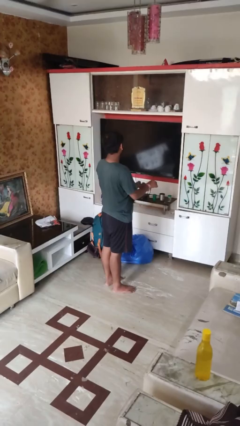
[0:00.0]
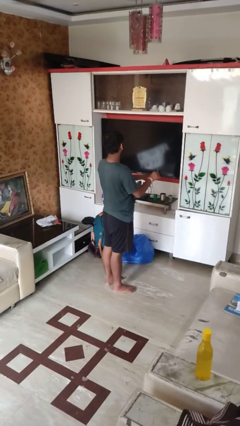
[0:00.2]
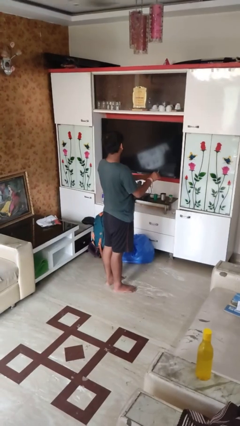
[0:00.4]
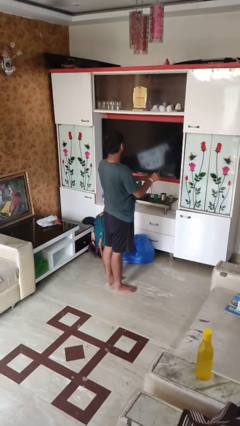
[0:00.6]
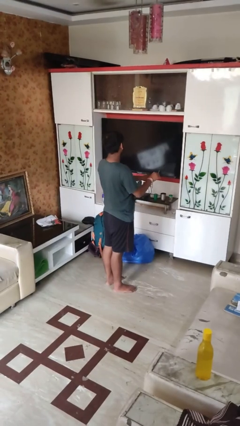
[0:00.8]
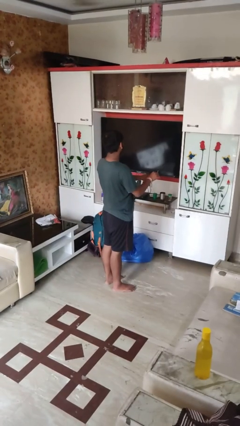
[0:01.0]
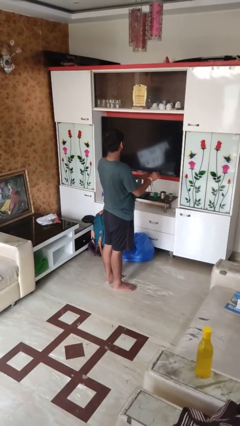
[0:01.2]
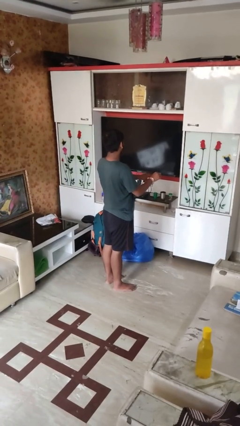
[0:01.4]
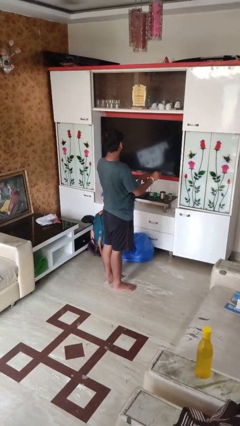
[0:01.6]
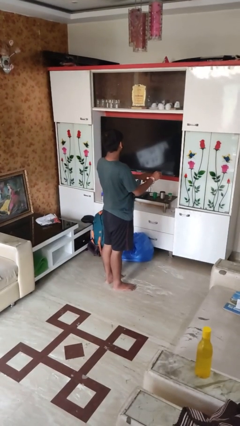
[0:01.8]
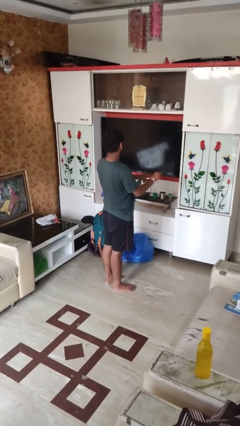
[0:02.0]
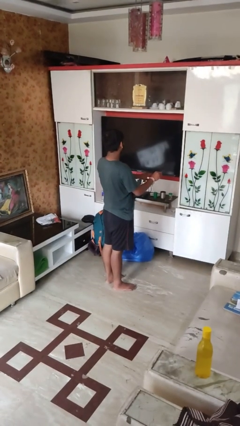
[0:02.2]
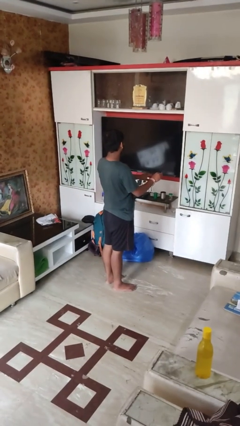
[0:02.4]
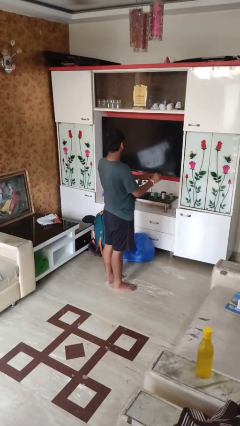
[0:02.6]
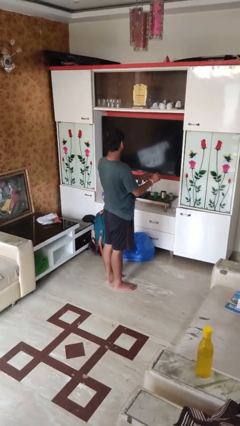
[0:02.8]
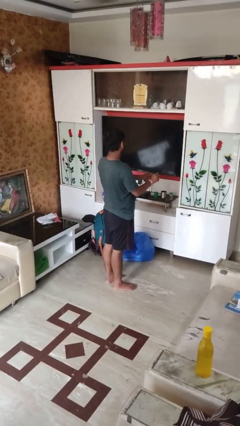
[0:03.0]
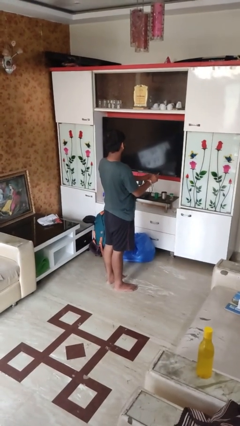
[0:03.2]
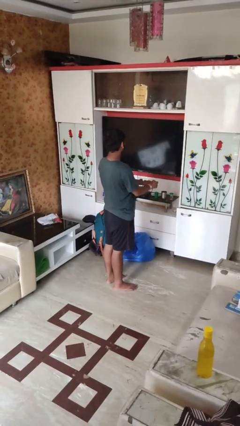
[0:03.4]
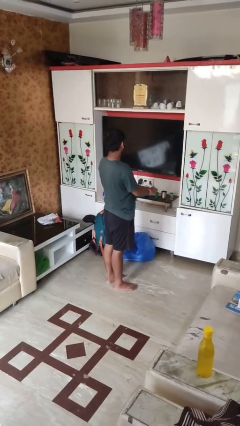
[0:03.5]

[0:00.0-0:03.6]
person files fingernails

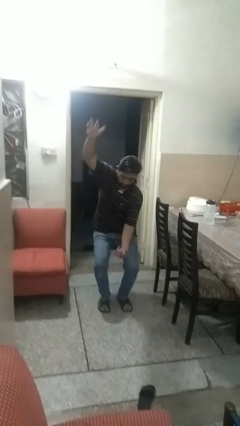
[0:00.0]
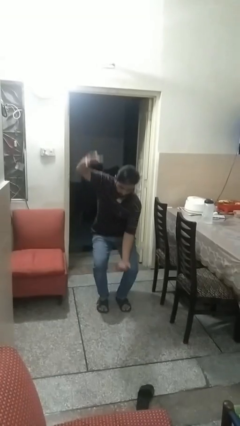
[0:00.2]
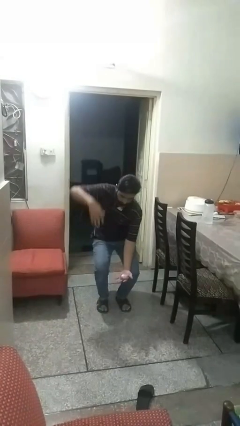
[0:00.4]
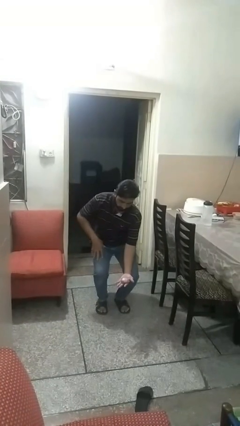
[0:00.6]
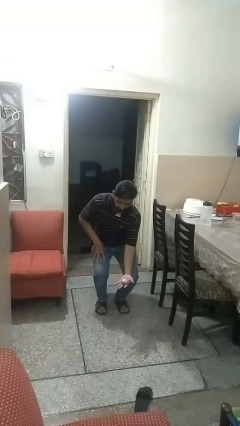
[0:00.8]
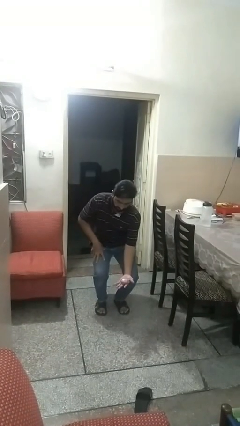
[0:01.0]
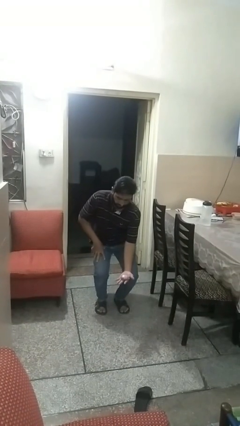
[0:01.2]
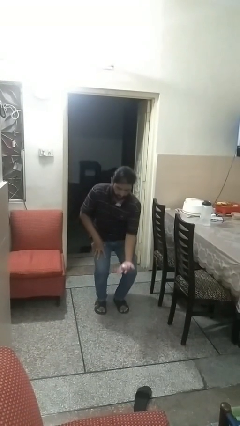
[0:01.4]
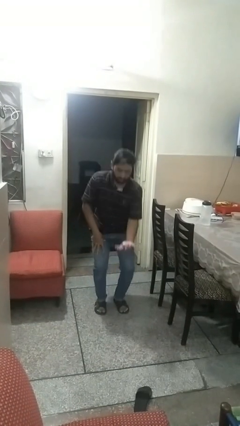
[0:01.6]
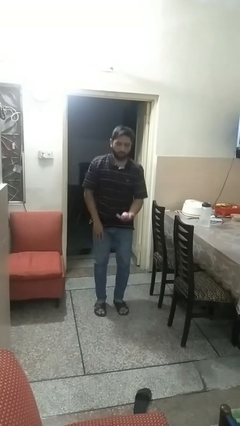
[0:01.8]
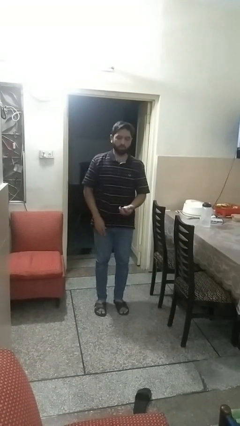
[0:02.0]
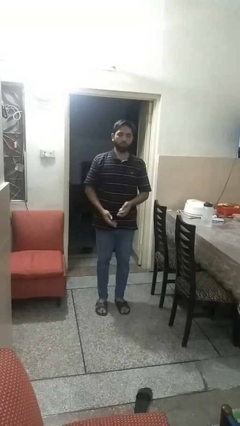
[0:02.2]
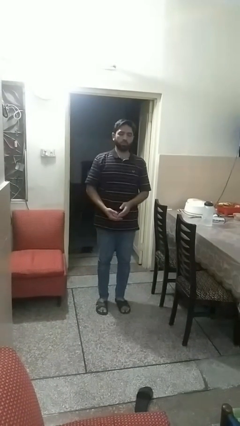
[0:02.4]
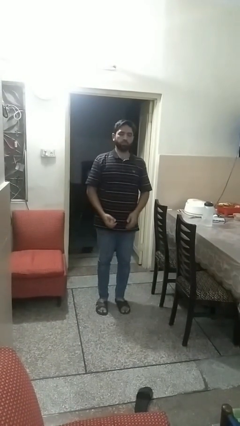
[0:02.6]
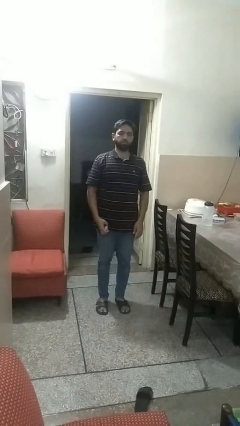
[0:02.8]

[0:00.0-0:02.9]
person catches dropped object

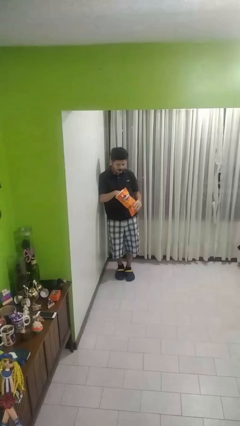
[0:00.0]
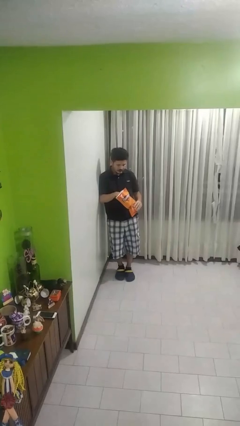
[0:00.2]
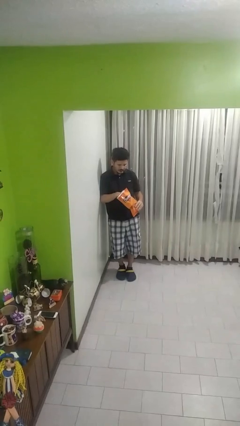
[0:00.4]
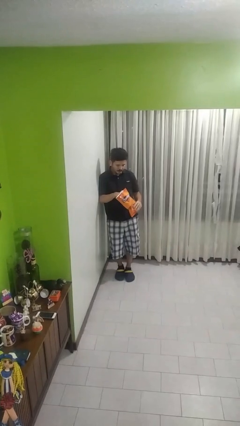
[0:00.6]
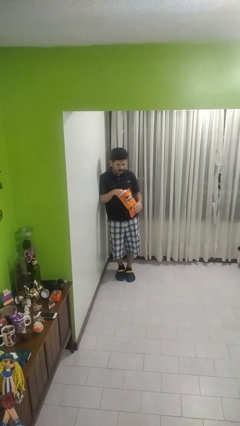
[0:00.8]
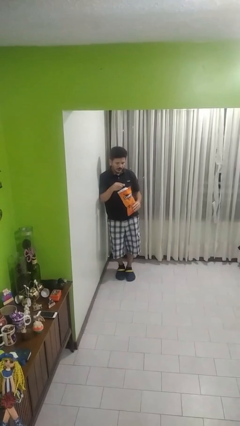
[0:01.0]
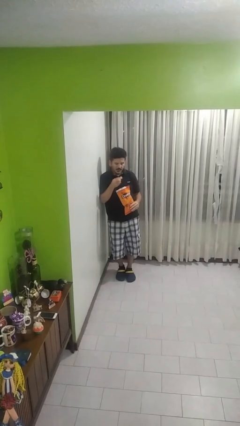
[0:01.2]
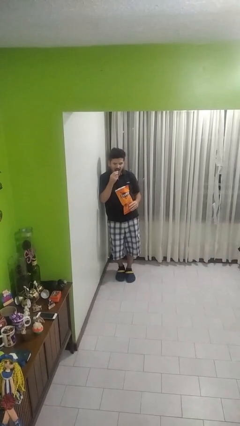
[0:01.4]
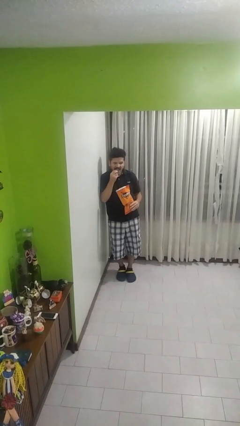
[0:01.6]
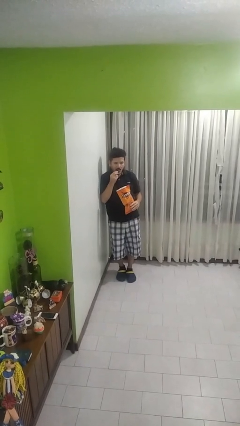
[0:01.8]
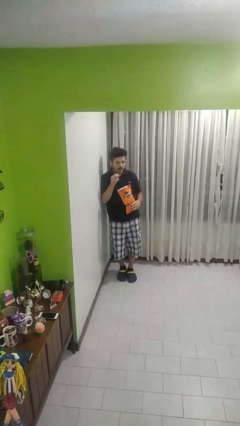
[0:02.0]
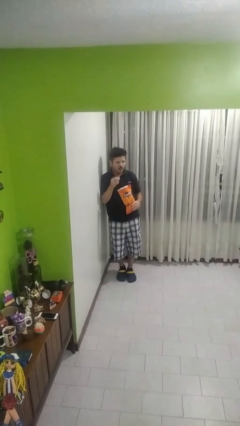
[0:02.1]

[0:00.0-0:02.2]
person eats snack from bag

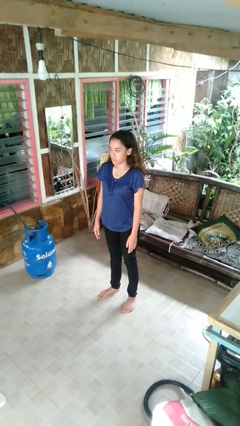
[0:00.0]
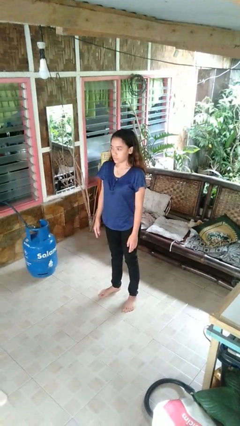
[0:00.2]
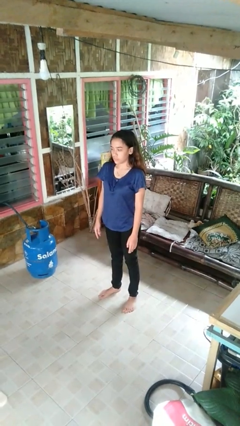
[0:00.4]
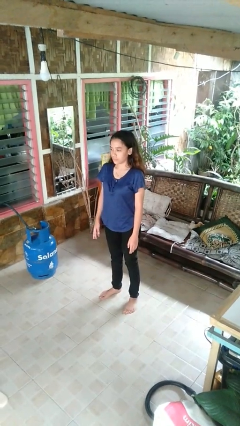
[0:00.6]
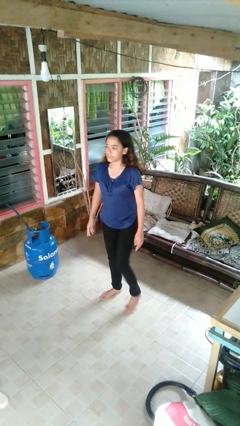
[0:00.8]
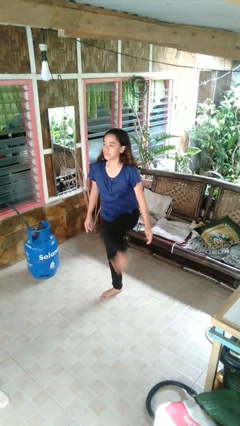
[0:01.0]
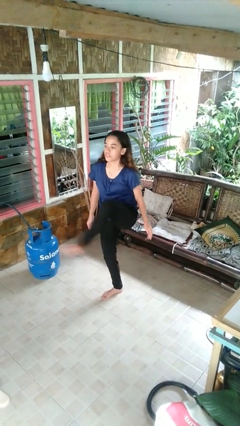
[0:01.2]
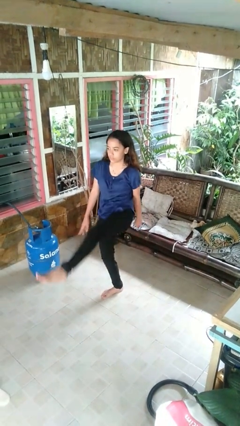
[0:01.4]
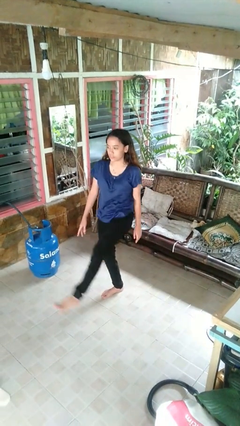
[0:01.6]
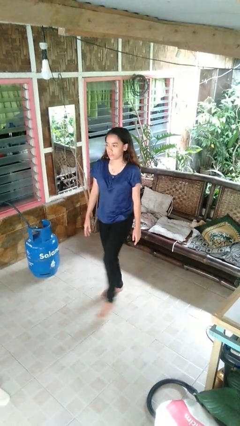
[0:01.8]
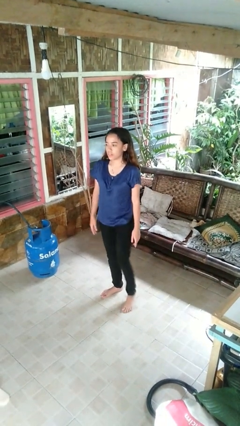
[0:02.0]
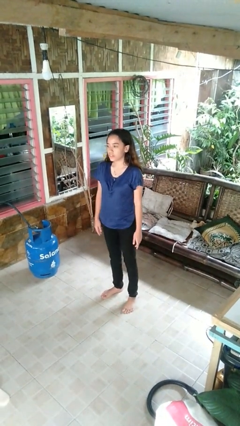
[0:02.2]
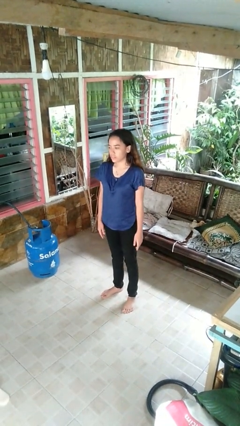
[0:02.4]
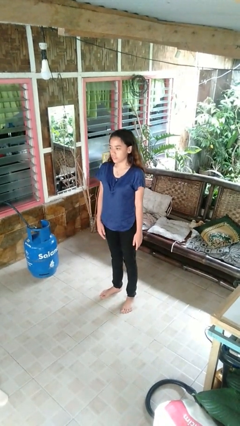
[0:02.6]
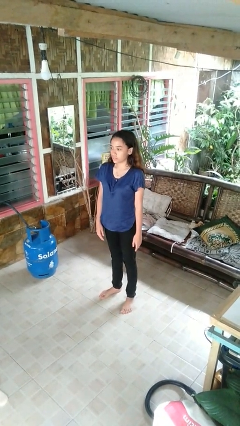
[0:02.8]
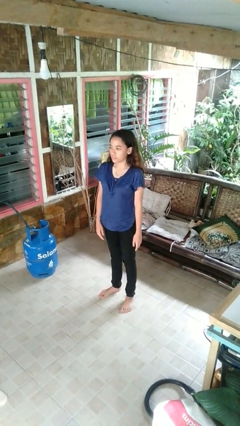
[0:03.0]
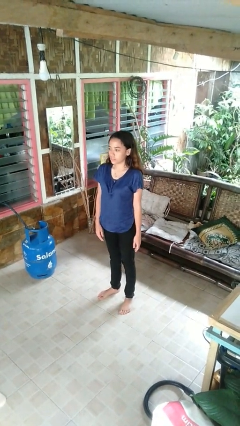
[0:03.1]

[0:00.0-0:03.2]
person karate kicks

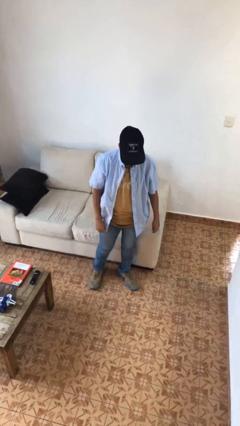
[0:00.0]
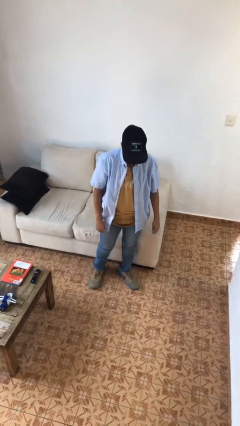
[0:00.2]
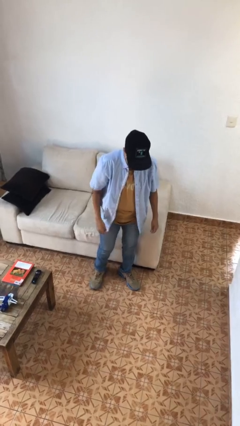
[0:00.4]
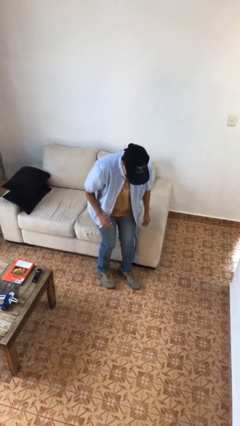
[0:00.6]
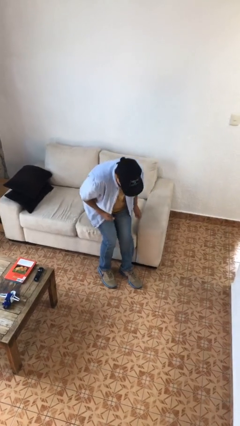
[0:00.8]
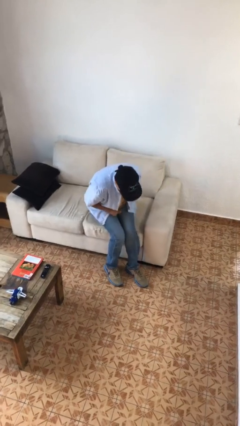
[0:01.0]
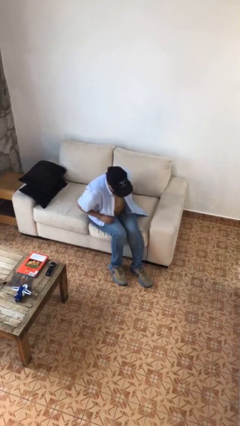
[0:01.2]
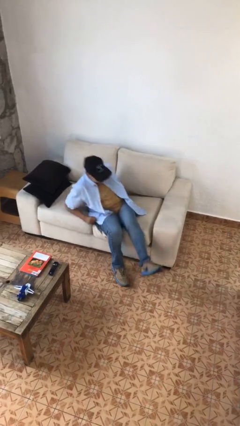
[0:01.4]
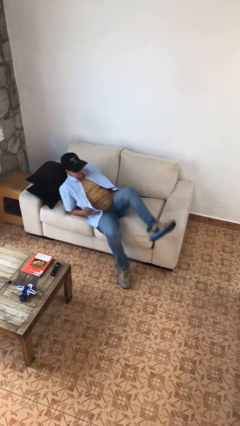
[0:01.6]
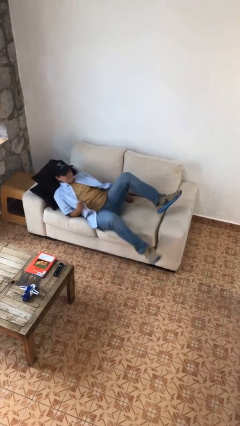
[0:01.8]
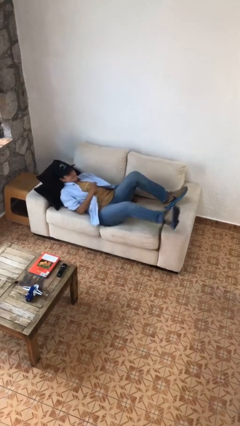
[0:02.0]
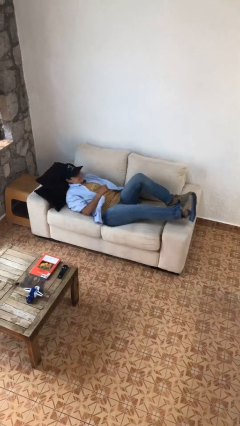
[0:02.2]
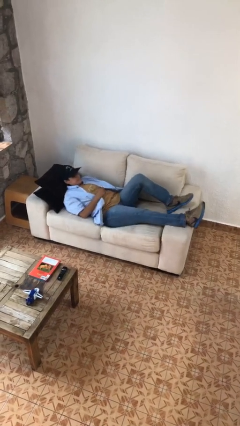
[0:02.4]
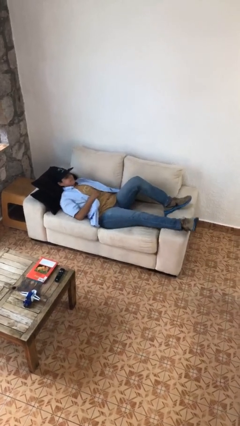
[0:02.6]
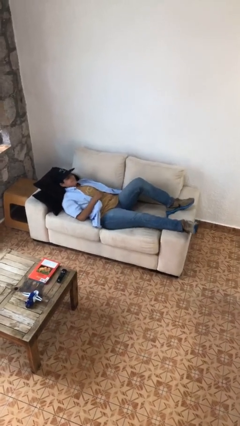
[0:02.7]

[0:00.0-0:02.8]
person lies down on couch

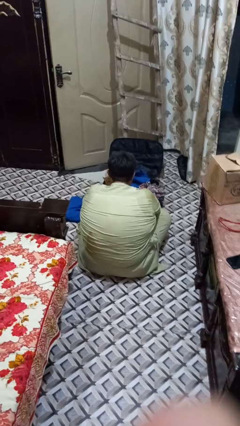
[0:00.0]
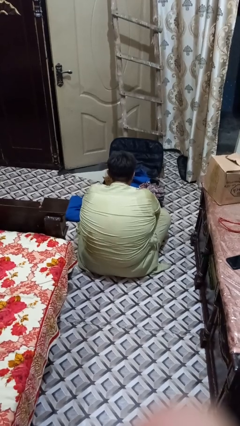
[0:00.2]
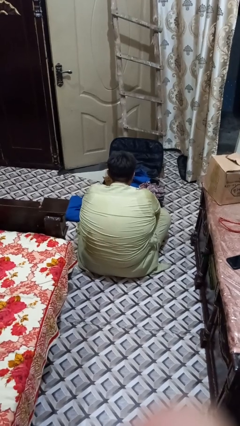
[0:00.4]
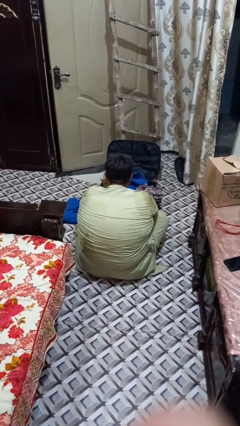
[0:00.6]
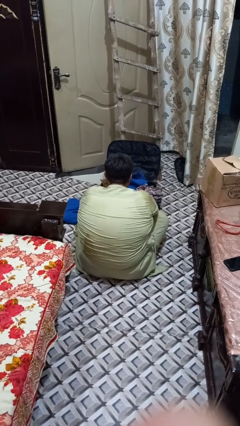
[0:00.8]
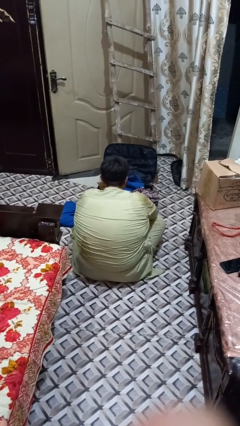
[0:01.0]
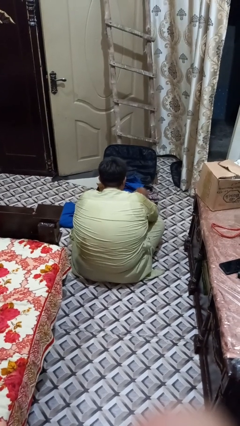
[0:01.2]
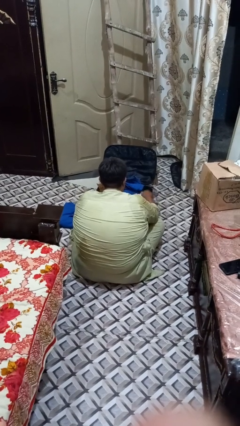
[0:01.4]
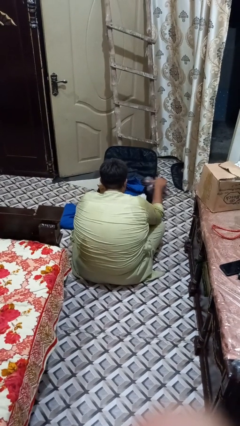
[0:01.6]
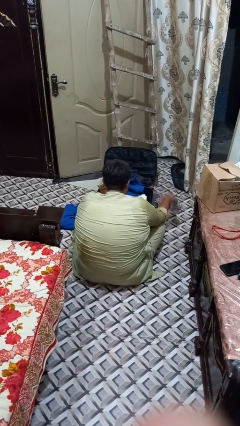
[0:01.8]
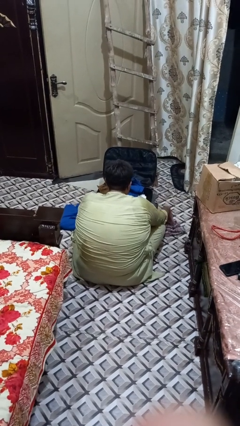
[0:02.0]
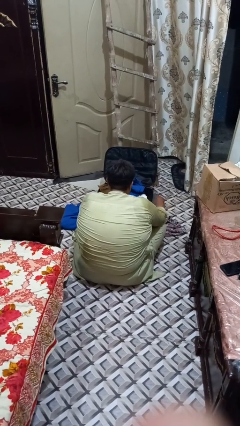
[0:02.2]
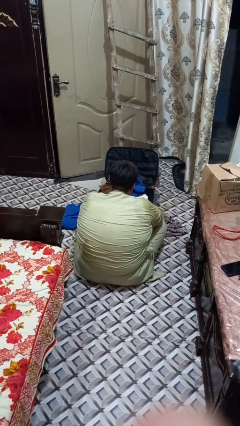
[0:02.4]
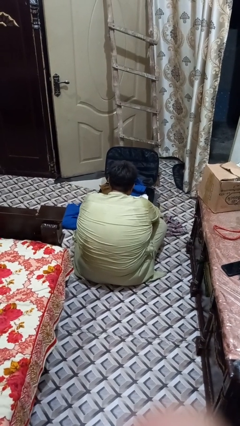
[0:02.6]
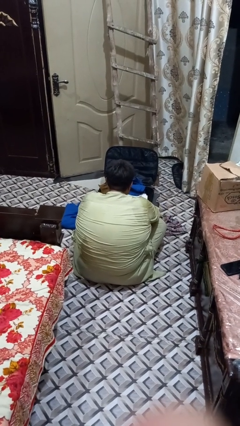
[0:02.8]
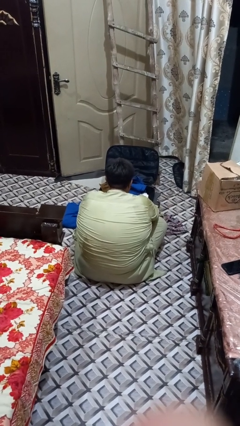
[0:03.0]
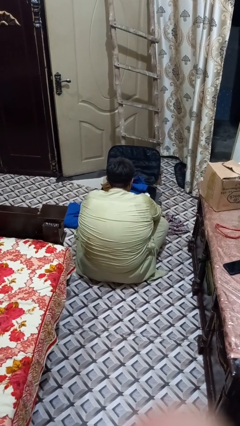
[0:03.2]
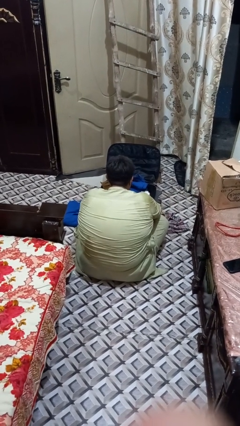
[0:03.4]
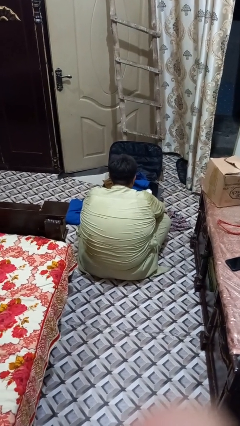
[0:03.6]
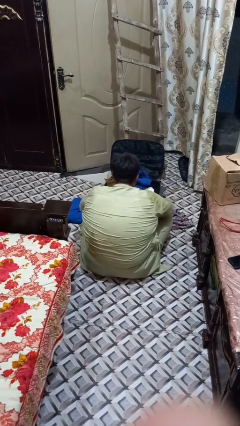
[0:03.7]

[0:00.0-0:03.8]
person unloads clothes from suitcase
